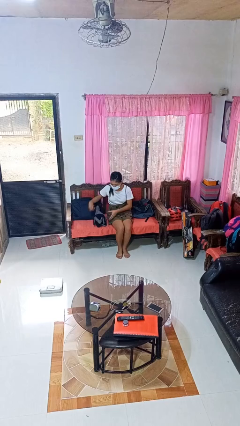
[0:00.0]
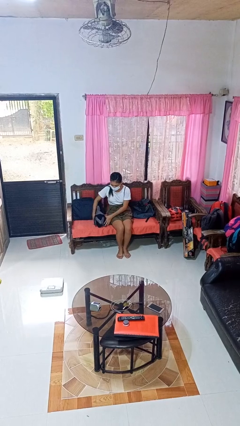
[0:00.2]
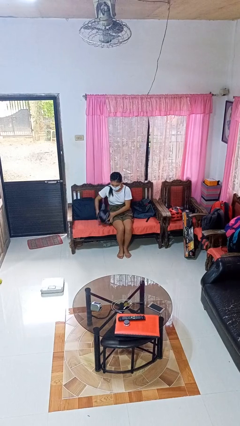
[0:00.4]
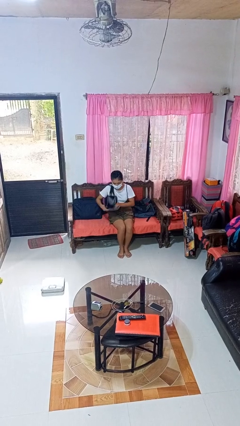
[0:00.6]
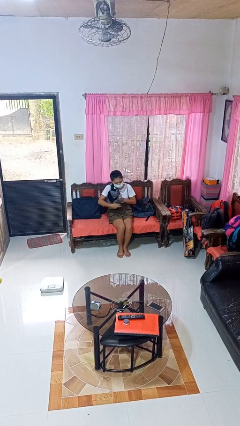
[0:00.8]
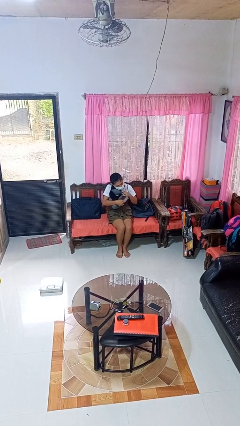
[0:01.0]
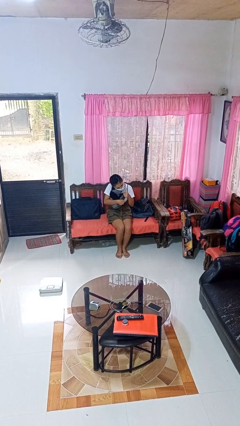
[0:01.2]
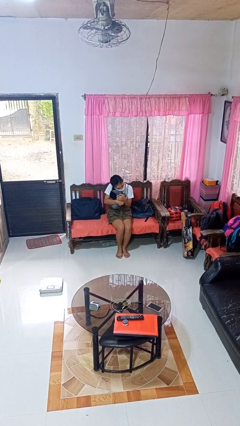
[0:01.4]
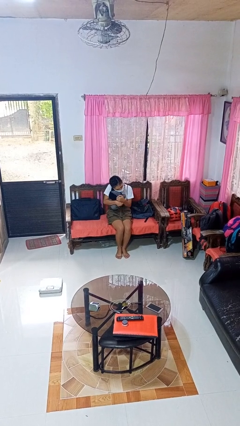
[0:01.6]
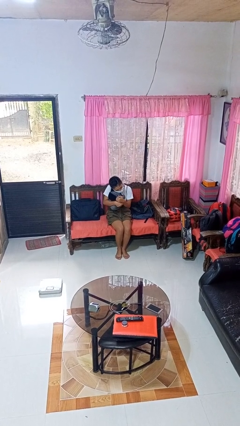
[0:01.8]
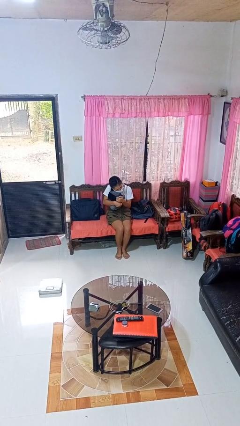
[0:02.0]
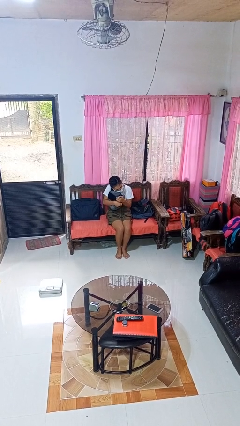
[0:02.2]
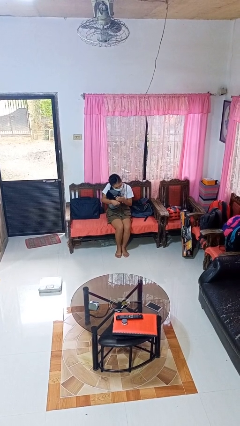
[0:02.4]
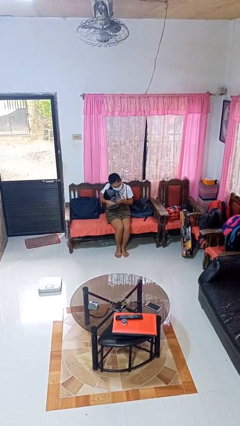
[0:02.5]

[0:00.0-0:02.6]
person hugs stuffed animal

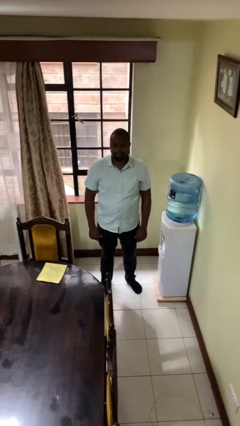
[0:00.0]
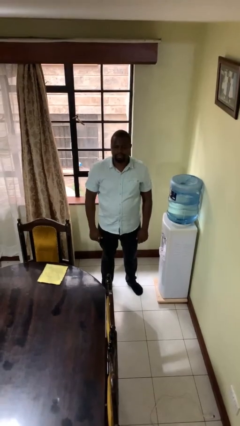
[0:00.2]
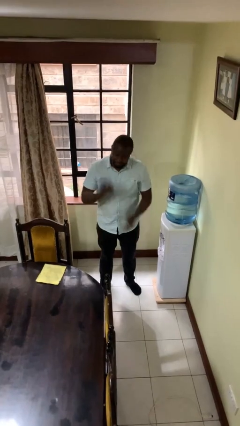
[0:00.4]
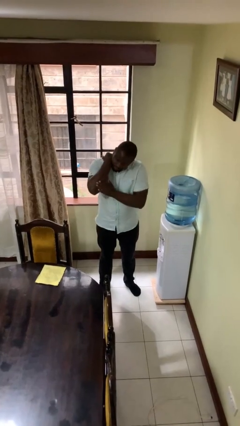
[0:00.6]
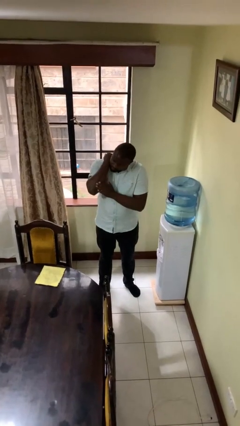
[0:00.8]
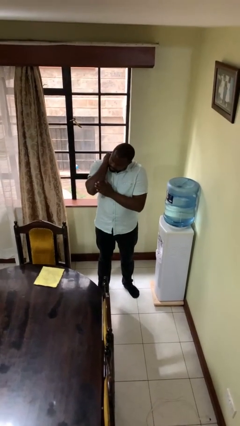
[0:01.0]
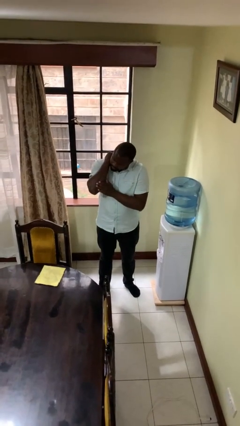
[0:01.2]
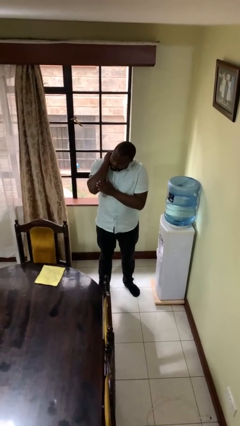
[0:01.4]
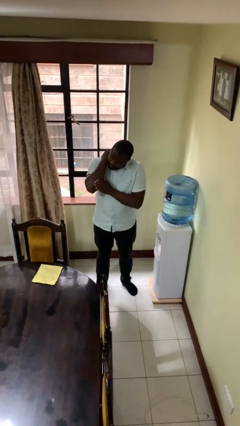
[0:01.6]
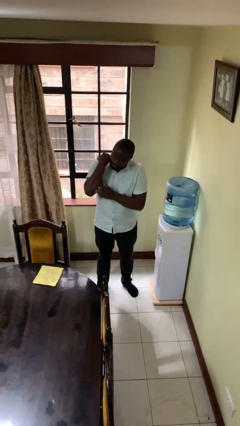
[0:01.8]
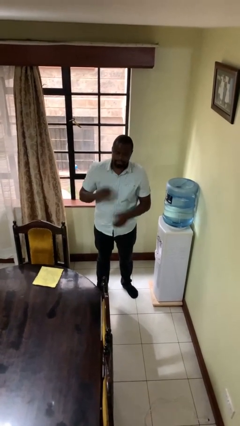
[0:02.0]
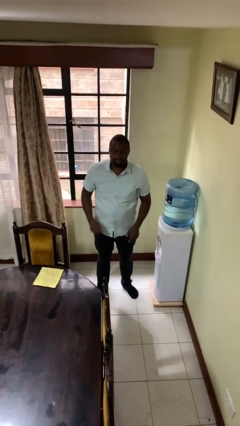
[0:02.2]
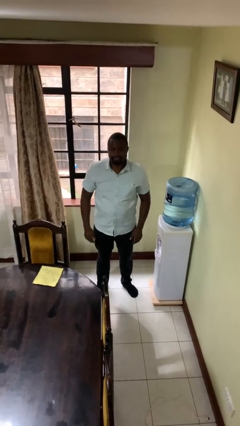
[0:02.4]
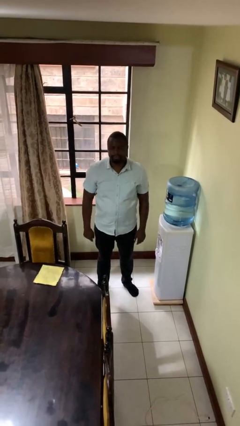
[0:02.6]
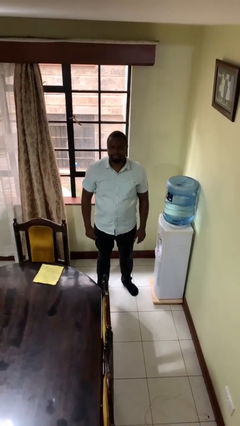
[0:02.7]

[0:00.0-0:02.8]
person swats bug

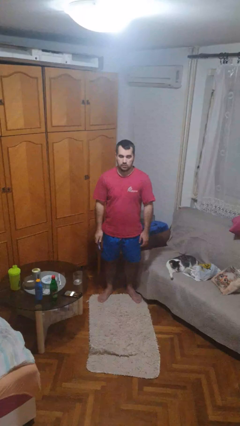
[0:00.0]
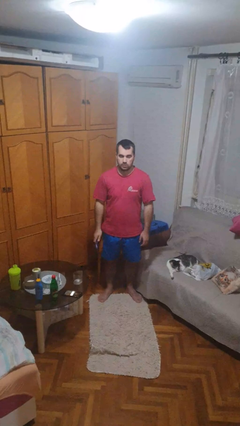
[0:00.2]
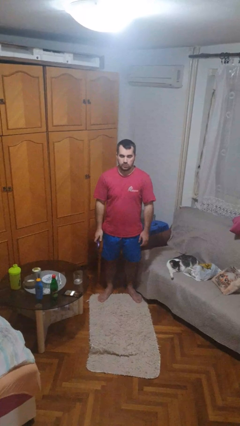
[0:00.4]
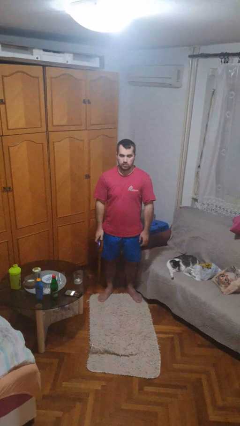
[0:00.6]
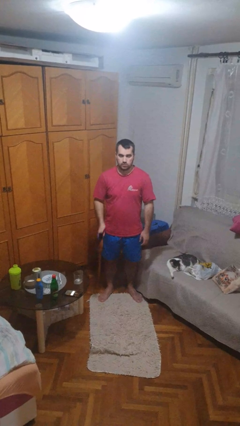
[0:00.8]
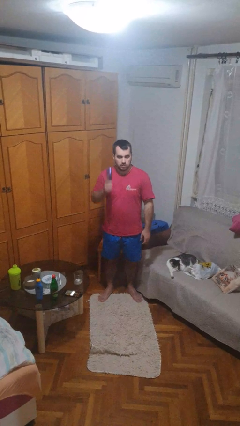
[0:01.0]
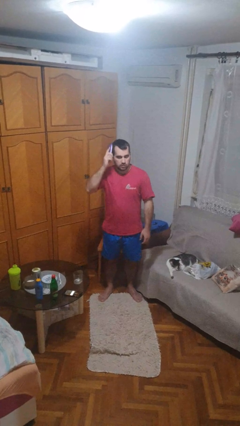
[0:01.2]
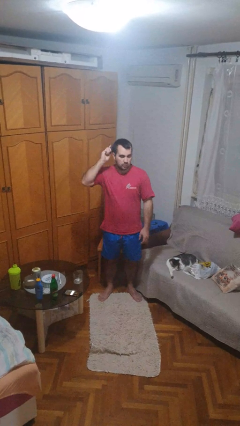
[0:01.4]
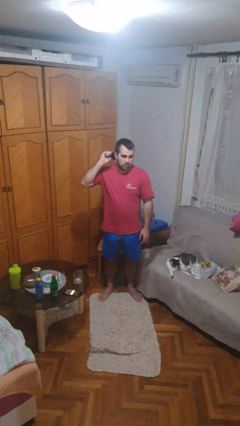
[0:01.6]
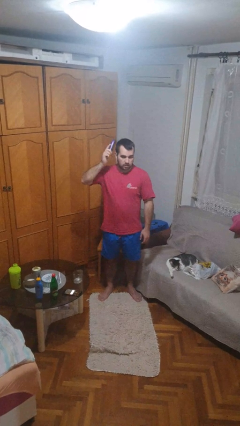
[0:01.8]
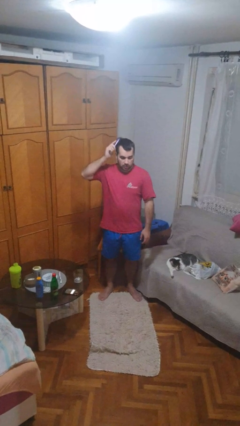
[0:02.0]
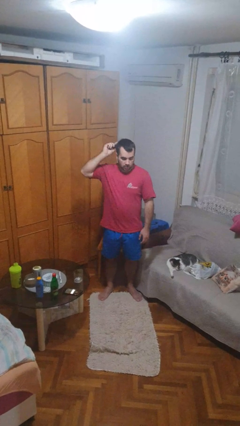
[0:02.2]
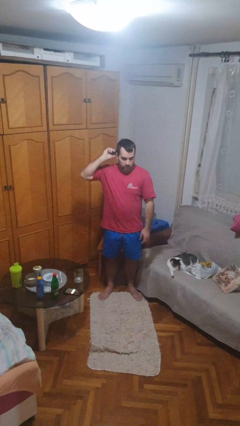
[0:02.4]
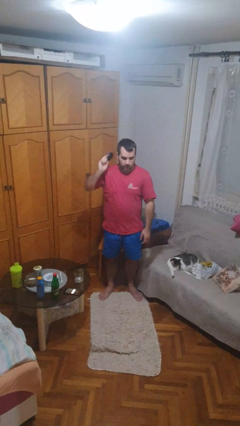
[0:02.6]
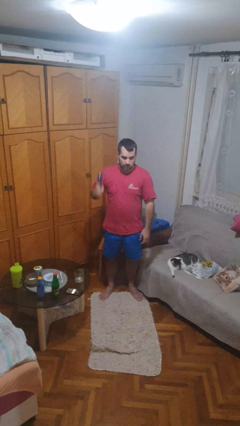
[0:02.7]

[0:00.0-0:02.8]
person brushes hair

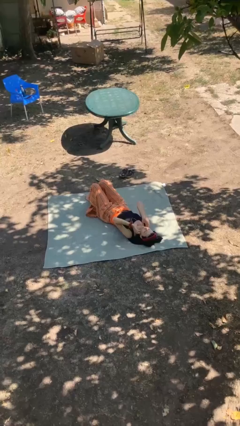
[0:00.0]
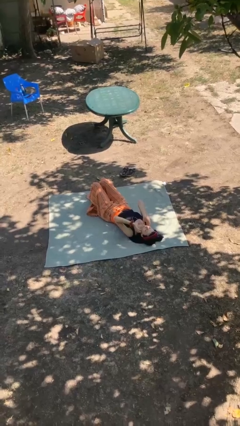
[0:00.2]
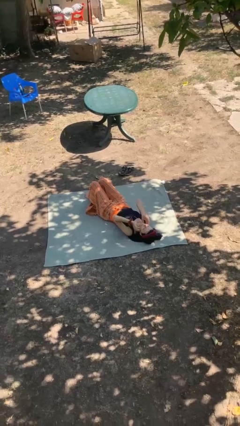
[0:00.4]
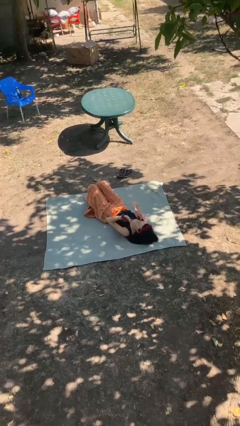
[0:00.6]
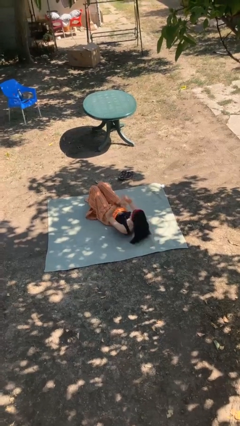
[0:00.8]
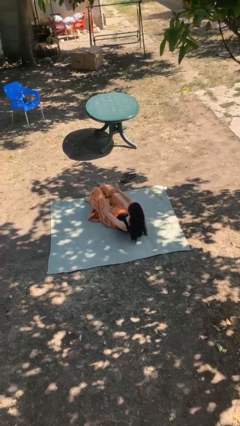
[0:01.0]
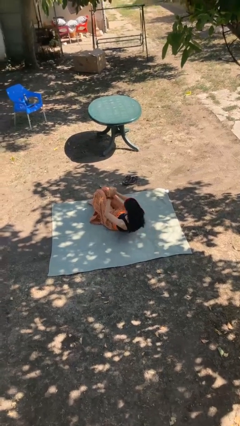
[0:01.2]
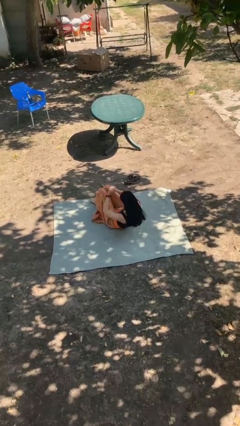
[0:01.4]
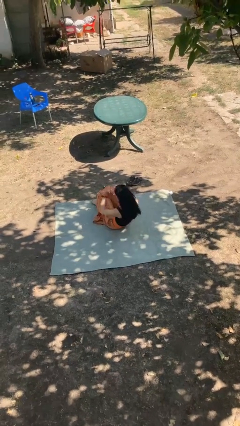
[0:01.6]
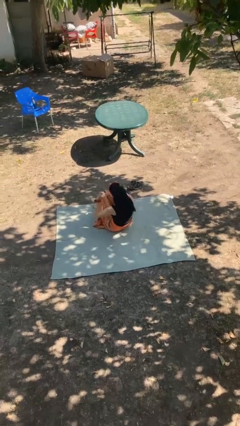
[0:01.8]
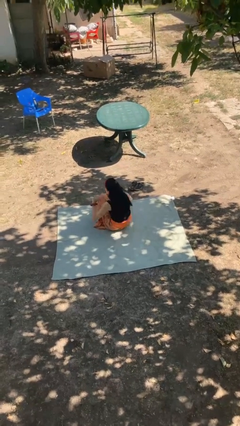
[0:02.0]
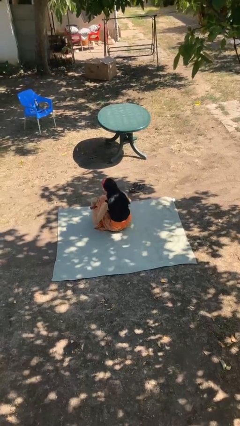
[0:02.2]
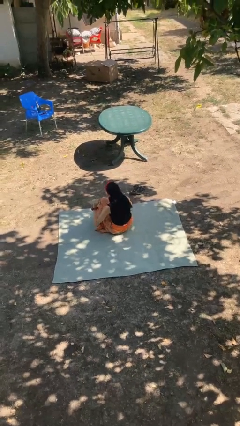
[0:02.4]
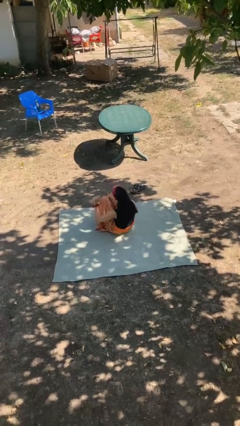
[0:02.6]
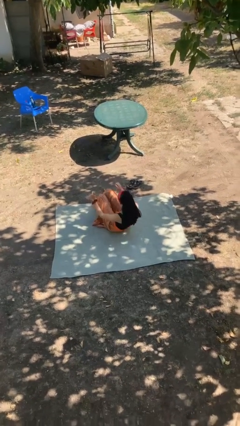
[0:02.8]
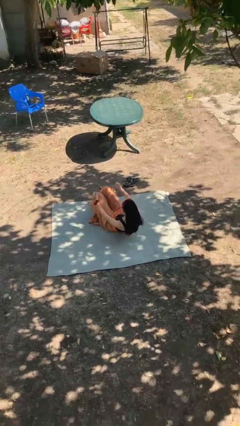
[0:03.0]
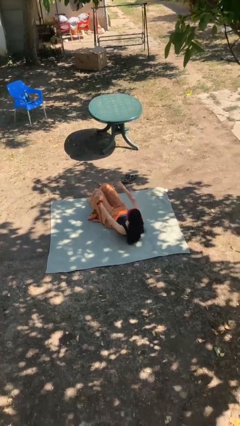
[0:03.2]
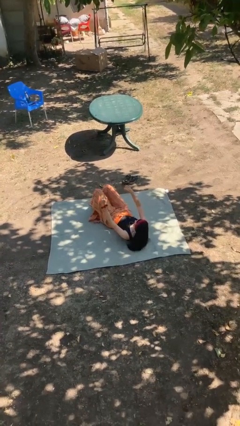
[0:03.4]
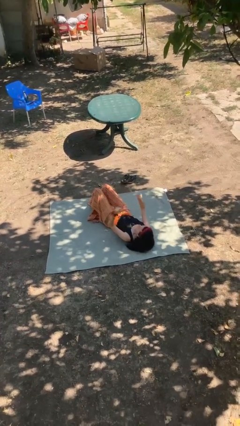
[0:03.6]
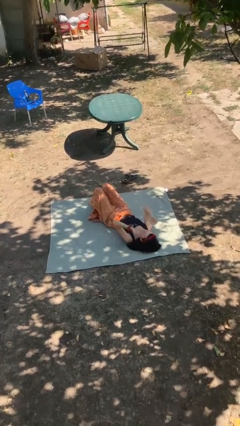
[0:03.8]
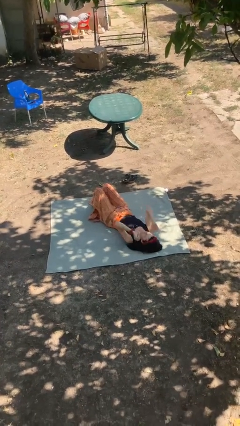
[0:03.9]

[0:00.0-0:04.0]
person exercises with situp

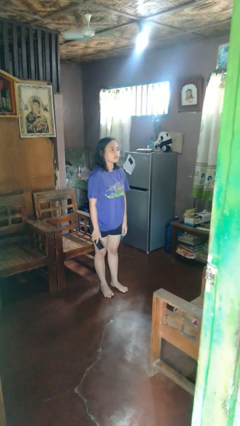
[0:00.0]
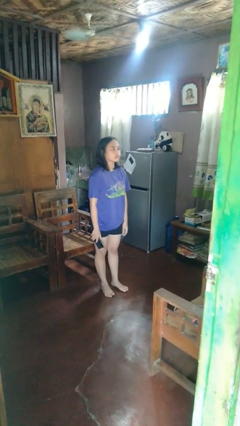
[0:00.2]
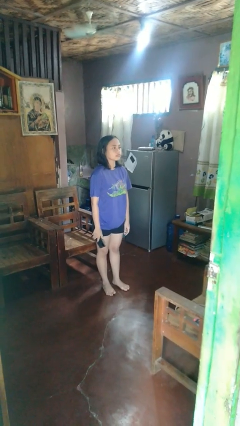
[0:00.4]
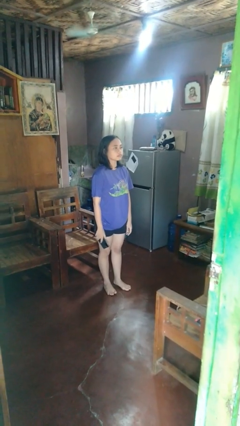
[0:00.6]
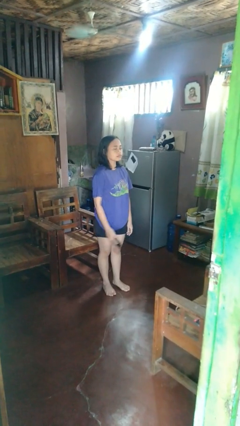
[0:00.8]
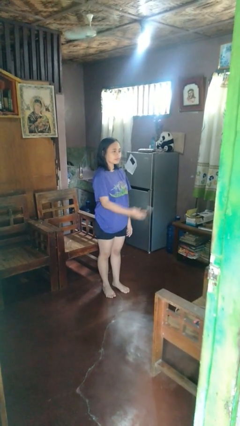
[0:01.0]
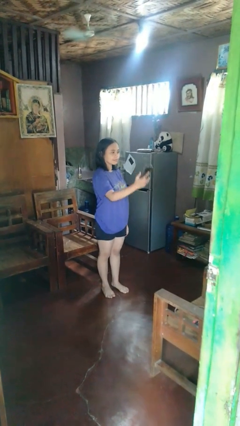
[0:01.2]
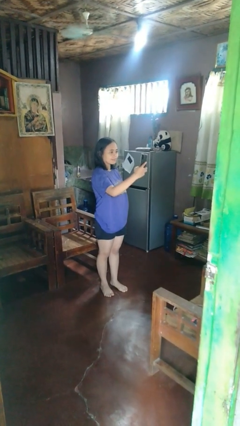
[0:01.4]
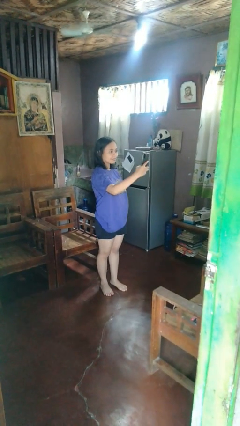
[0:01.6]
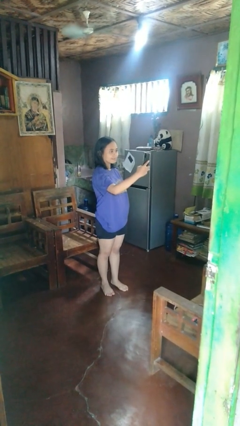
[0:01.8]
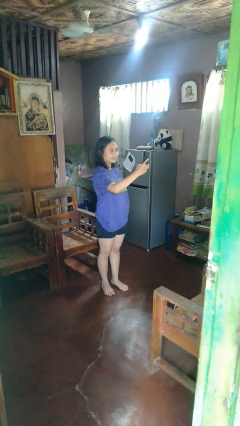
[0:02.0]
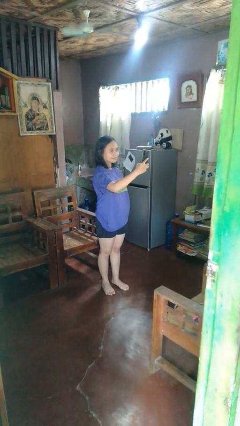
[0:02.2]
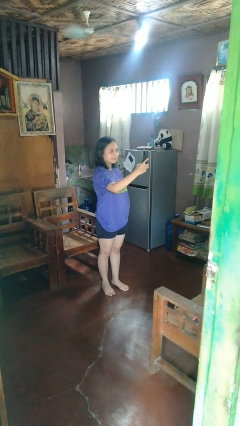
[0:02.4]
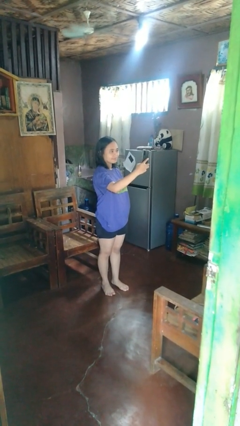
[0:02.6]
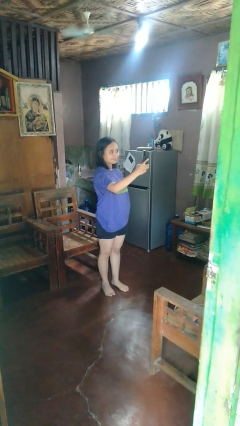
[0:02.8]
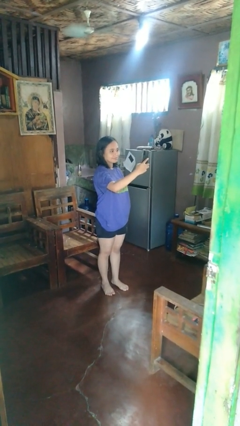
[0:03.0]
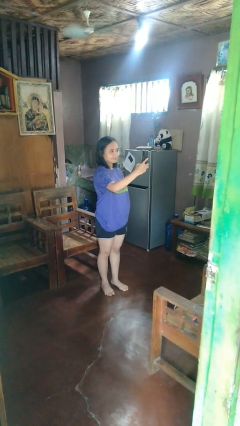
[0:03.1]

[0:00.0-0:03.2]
person takes selfie

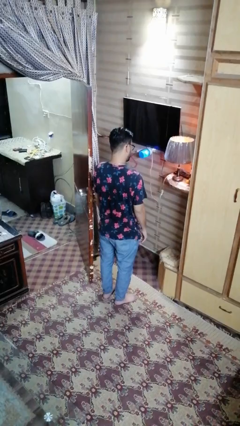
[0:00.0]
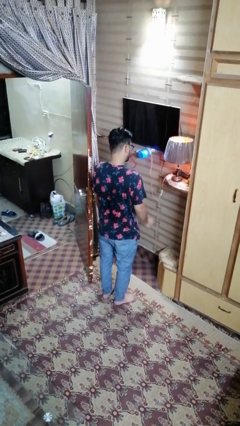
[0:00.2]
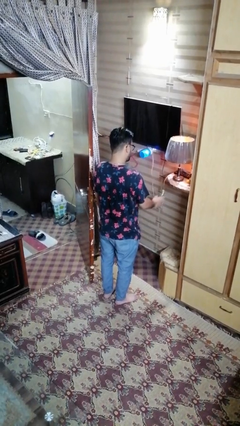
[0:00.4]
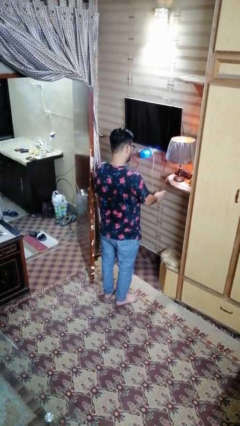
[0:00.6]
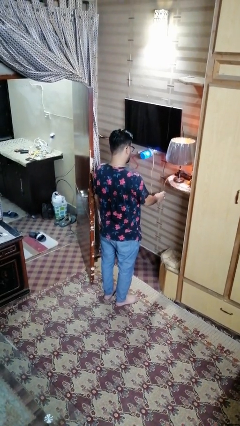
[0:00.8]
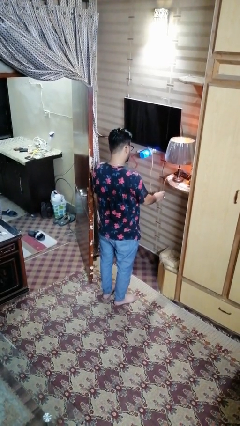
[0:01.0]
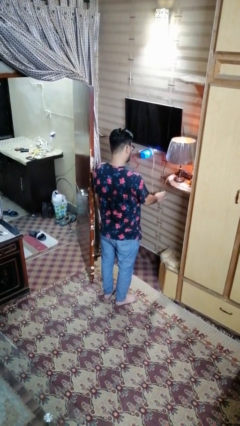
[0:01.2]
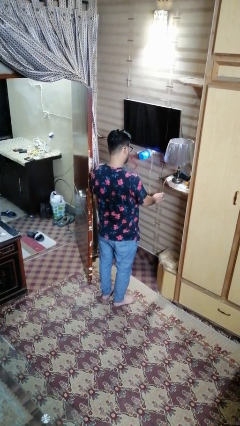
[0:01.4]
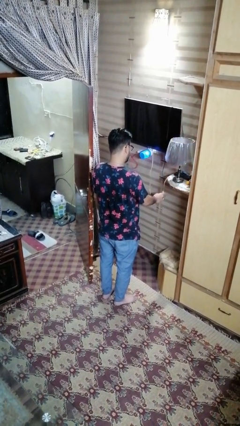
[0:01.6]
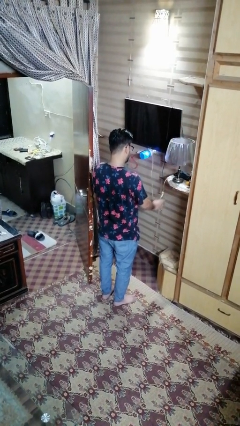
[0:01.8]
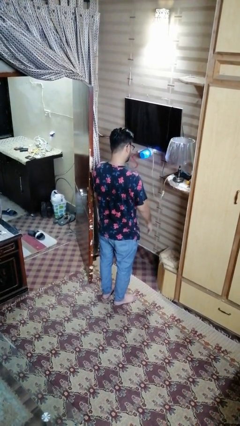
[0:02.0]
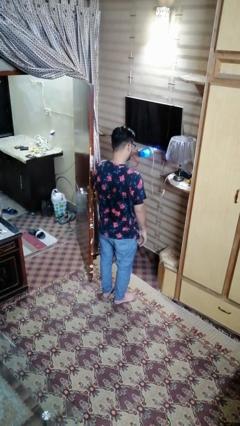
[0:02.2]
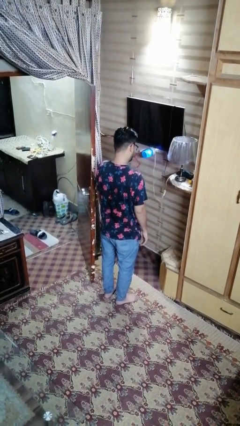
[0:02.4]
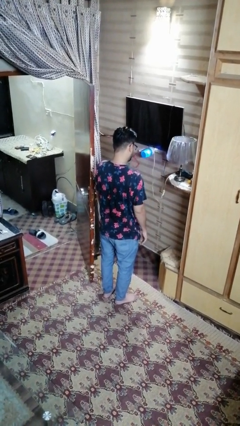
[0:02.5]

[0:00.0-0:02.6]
person turns off lamp
